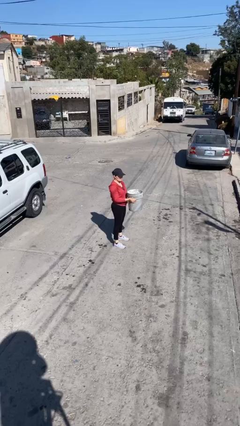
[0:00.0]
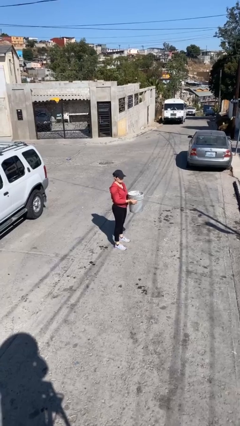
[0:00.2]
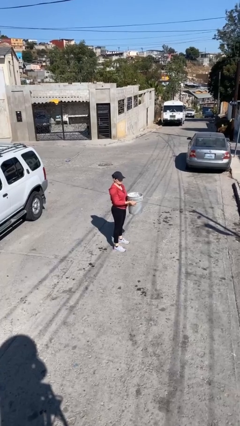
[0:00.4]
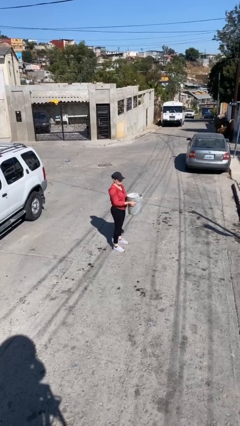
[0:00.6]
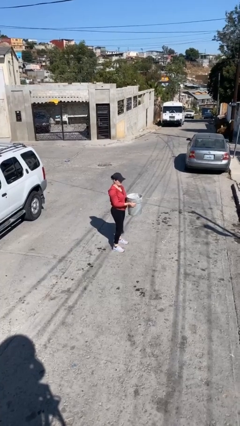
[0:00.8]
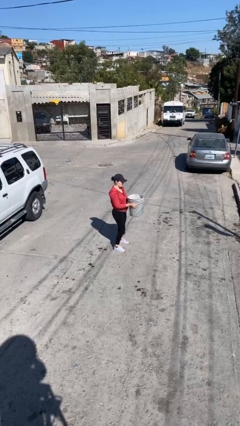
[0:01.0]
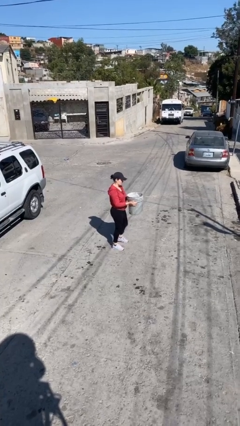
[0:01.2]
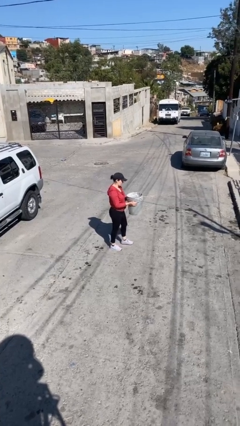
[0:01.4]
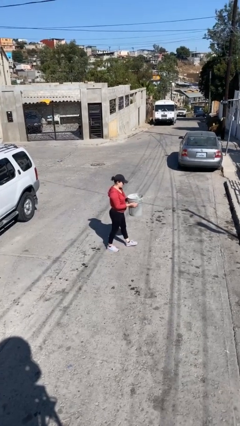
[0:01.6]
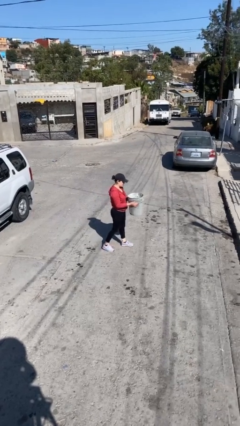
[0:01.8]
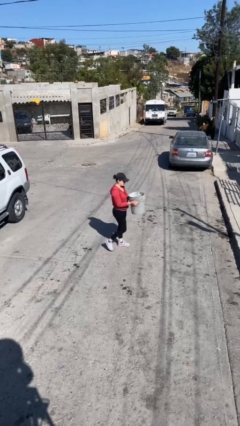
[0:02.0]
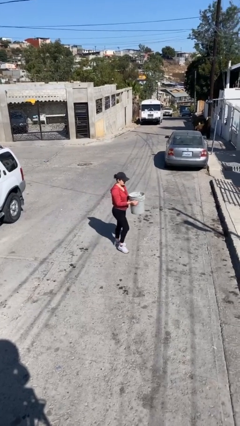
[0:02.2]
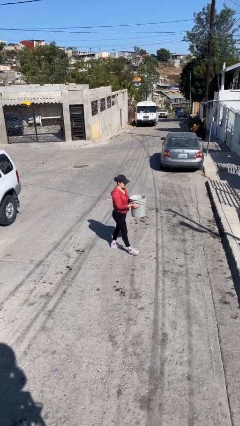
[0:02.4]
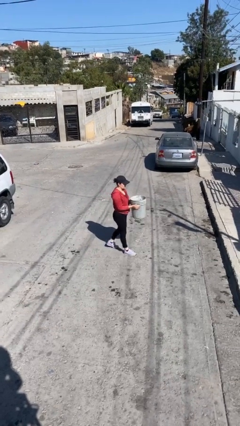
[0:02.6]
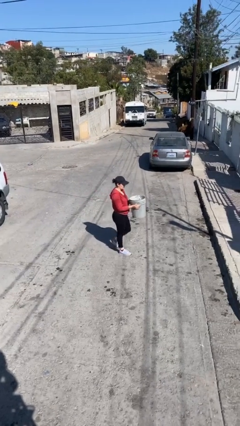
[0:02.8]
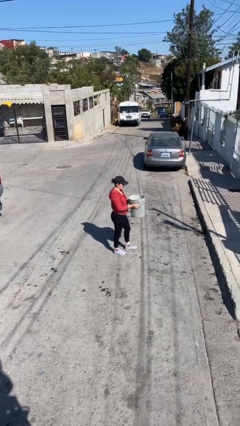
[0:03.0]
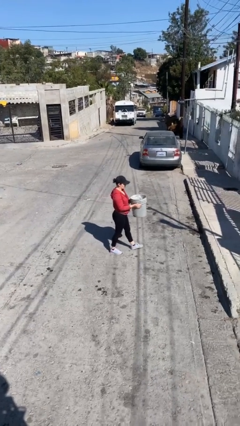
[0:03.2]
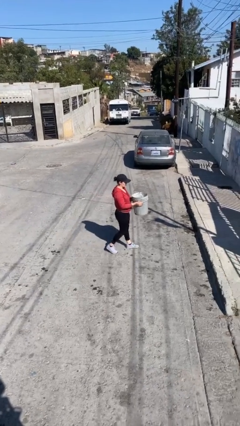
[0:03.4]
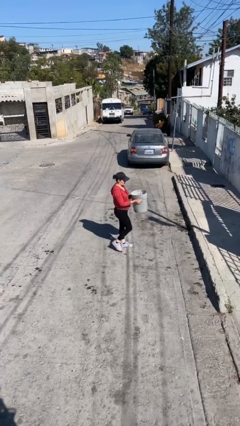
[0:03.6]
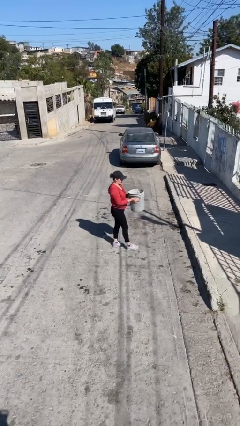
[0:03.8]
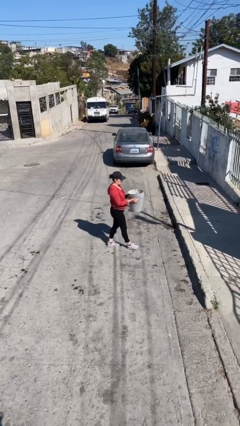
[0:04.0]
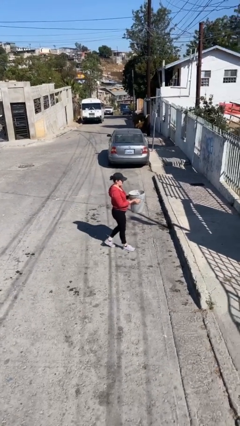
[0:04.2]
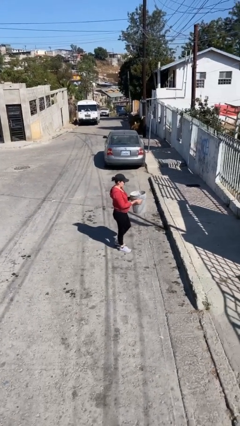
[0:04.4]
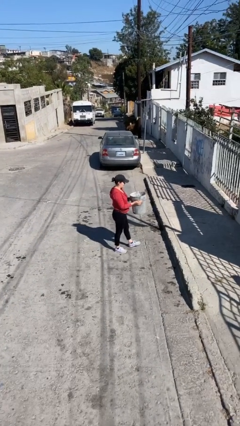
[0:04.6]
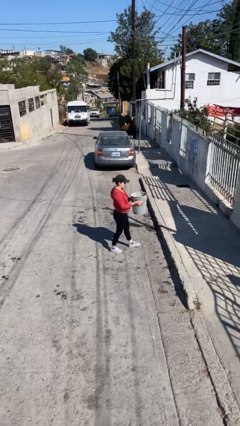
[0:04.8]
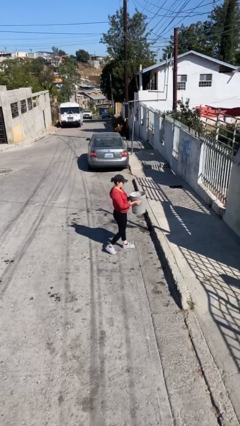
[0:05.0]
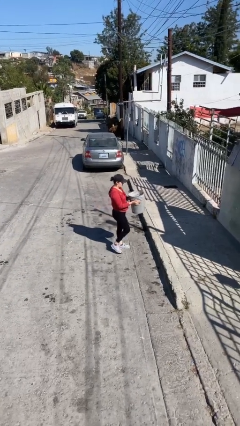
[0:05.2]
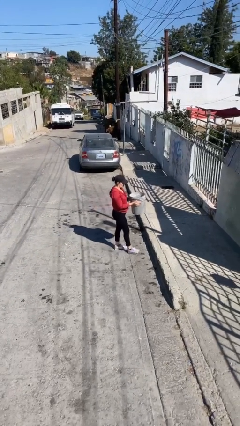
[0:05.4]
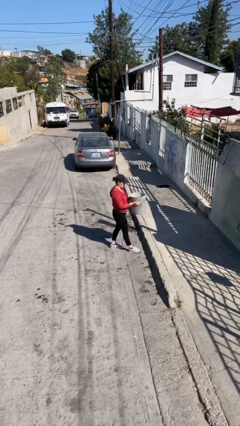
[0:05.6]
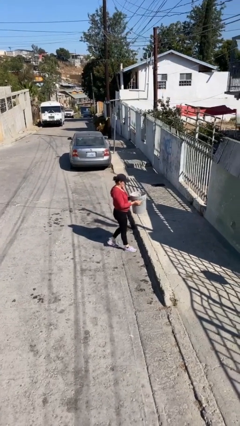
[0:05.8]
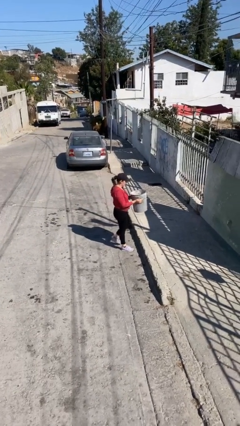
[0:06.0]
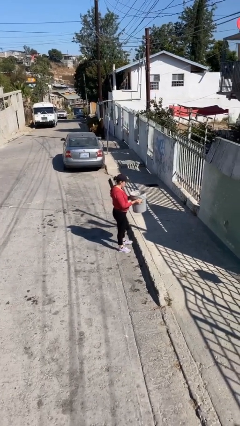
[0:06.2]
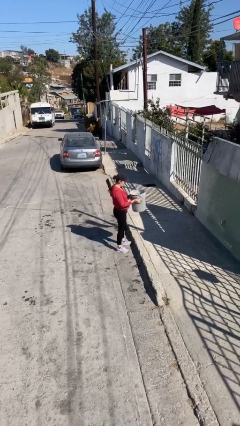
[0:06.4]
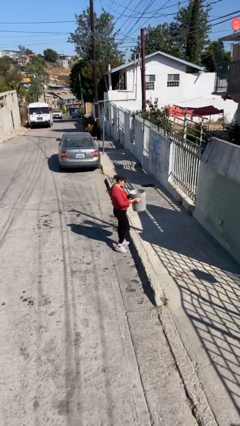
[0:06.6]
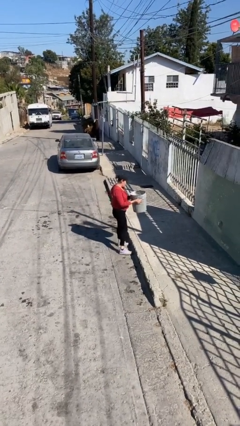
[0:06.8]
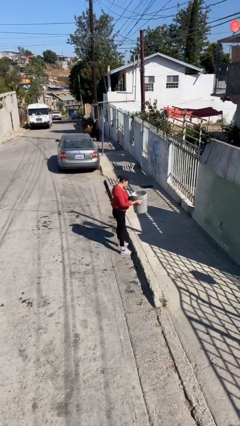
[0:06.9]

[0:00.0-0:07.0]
person carries heavy object

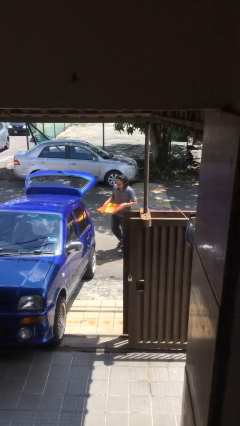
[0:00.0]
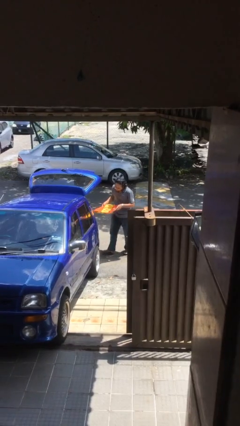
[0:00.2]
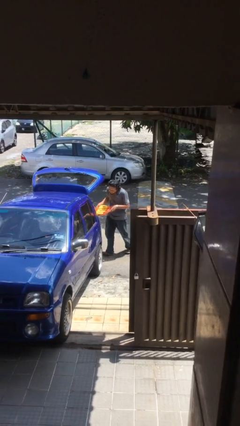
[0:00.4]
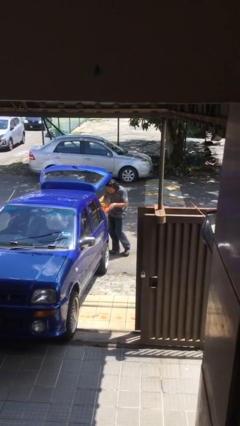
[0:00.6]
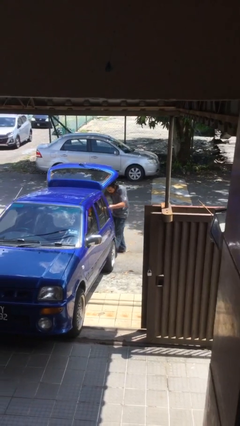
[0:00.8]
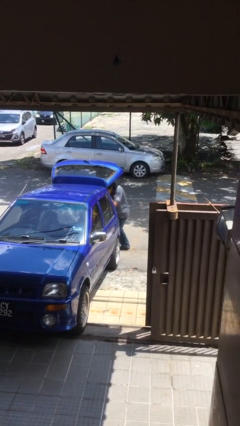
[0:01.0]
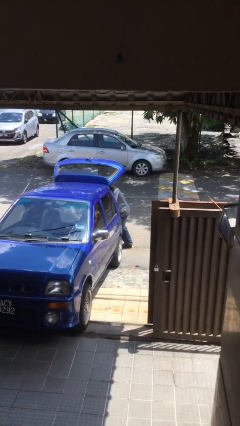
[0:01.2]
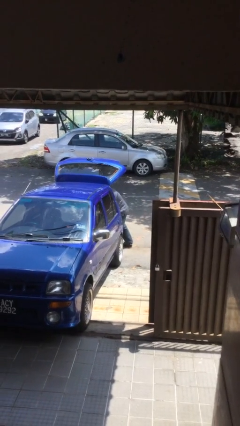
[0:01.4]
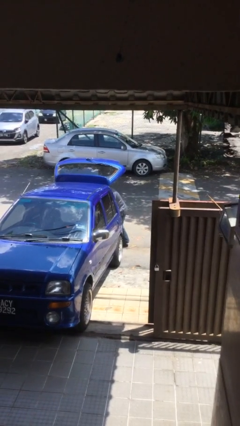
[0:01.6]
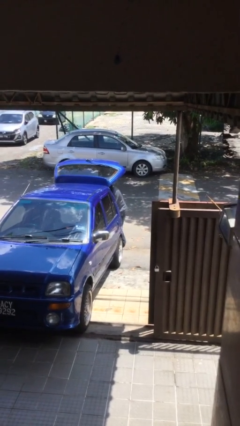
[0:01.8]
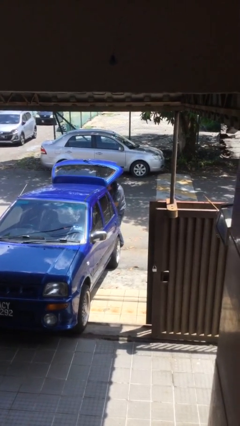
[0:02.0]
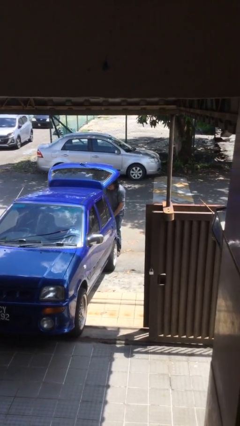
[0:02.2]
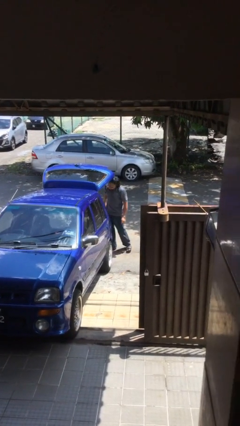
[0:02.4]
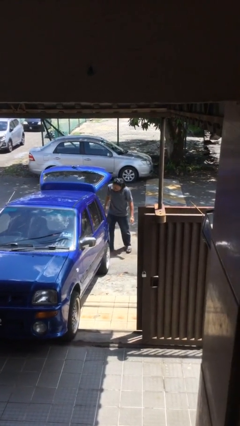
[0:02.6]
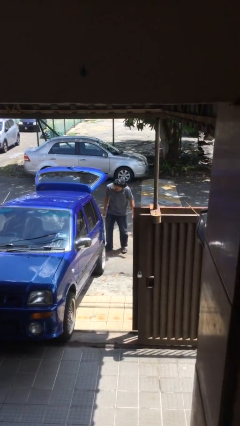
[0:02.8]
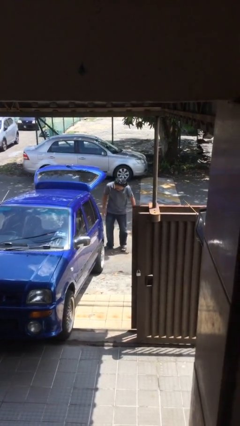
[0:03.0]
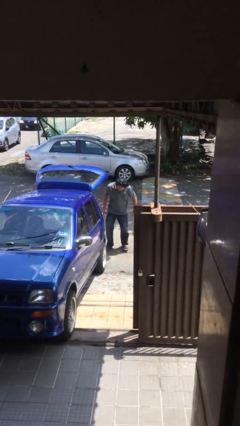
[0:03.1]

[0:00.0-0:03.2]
person loads car

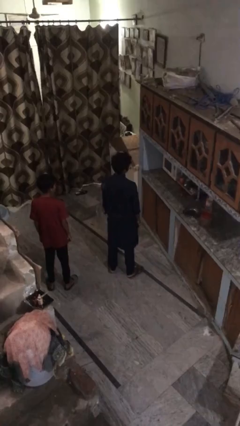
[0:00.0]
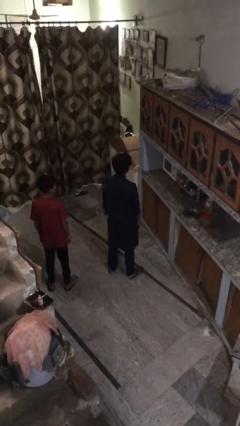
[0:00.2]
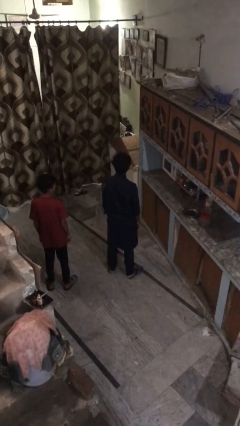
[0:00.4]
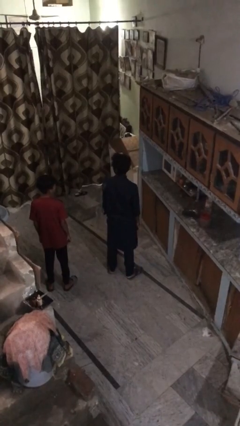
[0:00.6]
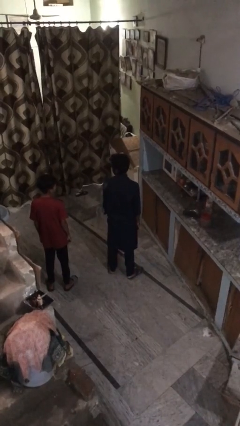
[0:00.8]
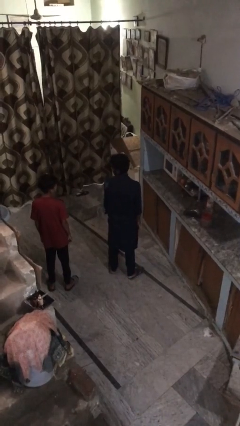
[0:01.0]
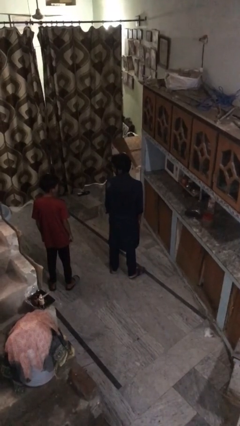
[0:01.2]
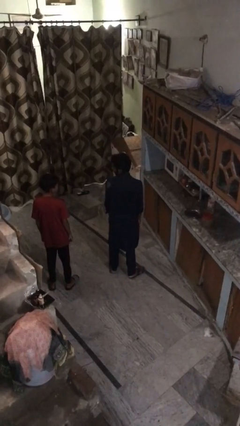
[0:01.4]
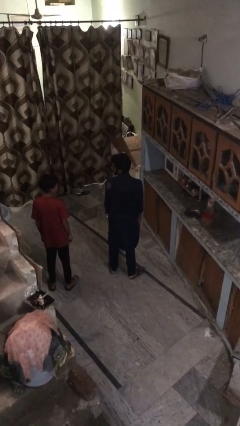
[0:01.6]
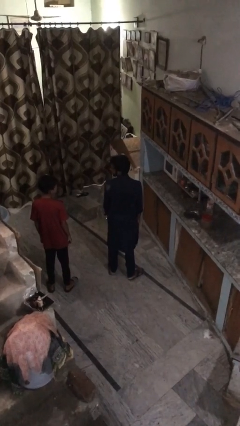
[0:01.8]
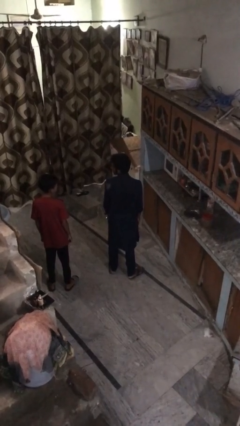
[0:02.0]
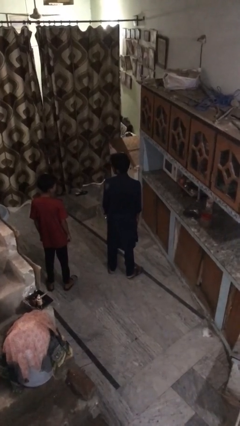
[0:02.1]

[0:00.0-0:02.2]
person looks over shoulder

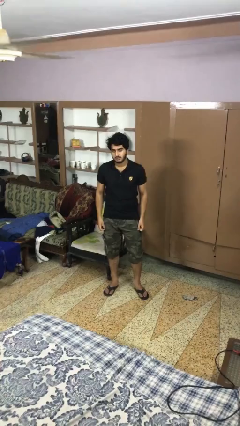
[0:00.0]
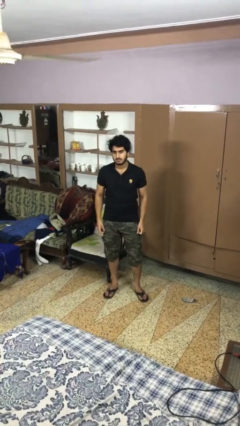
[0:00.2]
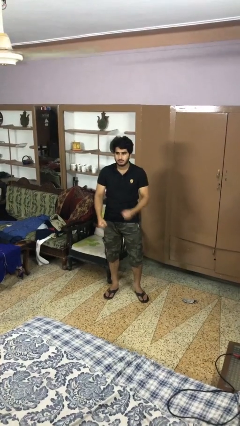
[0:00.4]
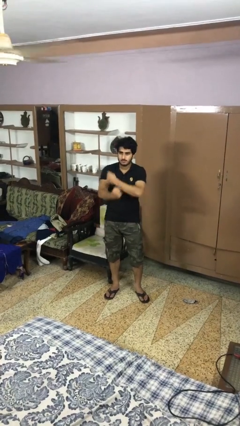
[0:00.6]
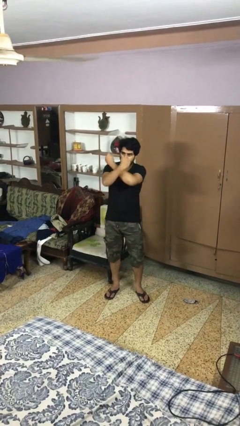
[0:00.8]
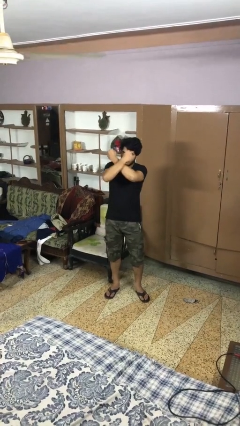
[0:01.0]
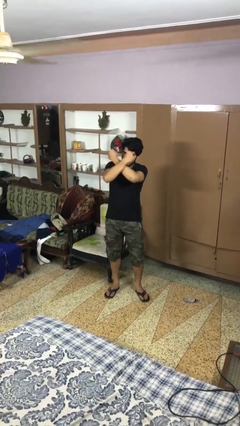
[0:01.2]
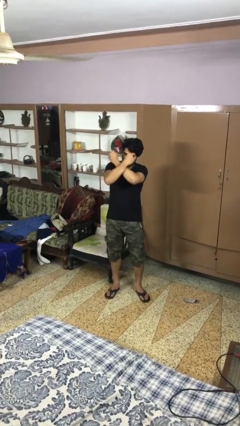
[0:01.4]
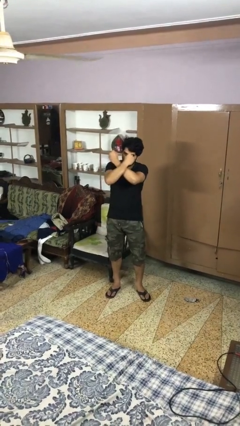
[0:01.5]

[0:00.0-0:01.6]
person gestures arms x

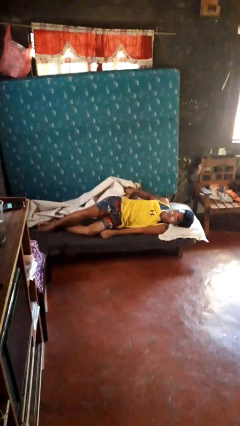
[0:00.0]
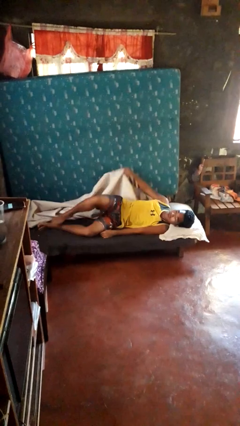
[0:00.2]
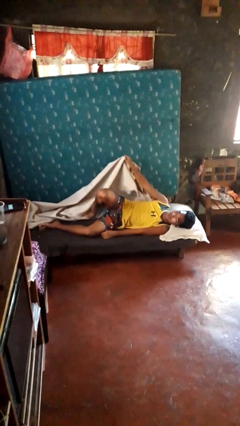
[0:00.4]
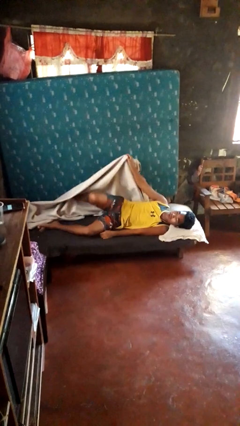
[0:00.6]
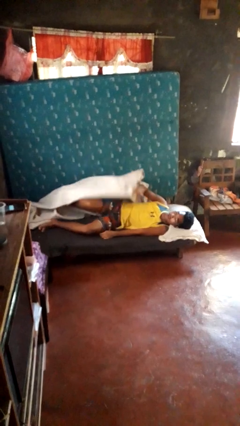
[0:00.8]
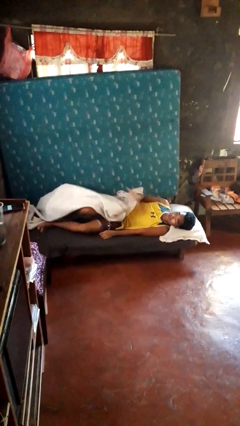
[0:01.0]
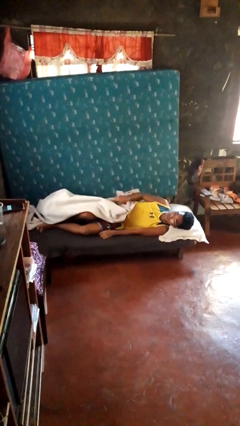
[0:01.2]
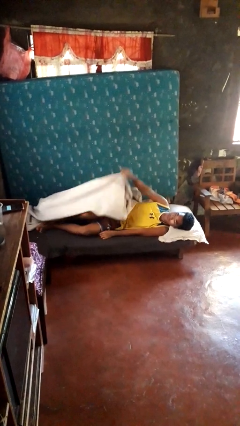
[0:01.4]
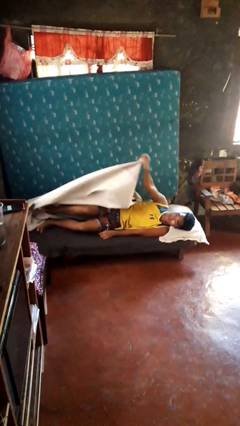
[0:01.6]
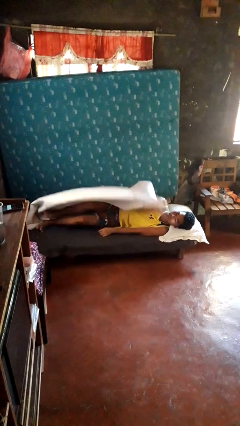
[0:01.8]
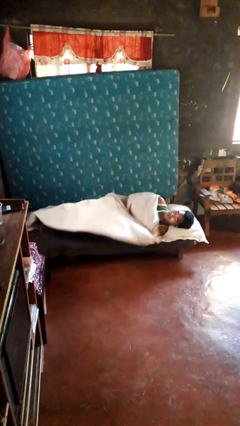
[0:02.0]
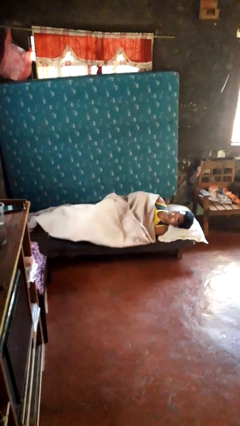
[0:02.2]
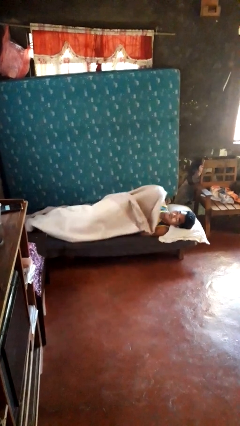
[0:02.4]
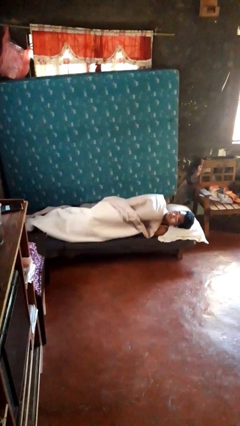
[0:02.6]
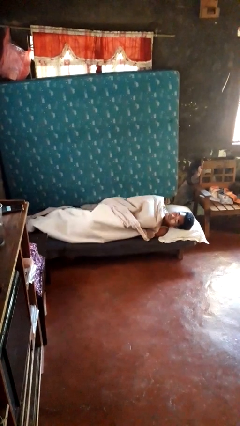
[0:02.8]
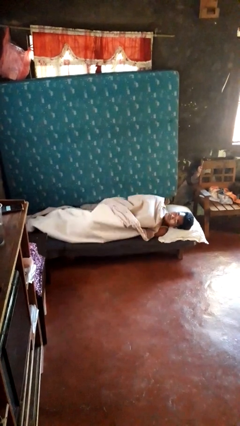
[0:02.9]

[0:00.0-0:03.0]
person covers with bedsheets

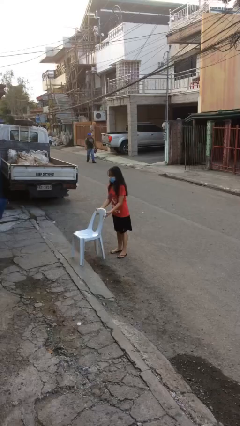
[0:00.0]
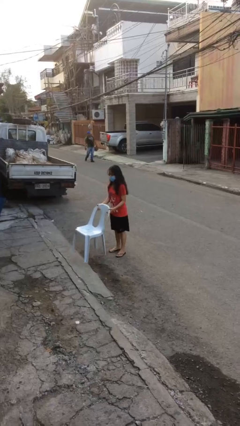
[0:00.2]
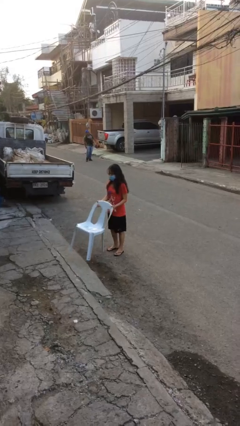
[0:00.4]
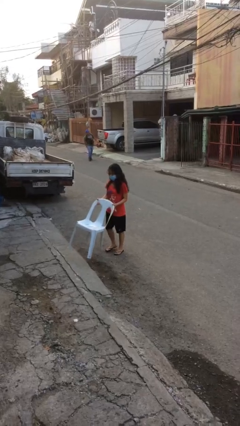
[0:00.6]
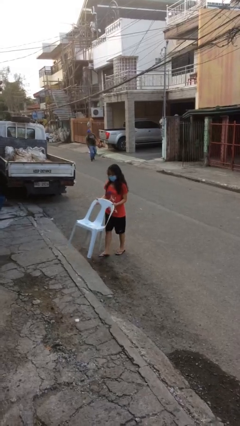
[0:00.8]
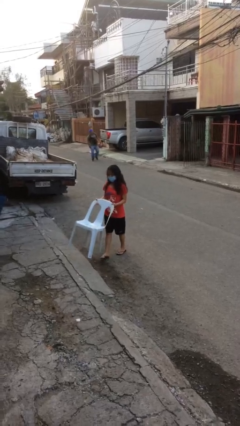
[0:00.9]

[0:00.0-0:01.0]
person picks up object from floor
